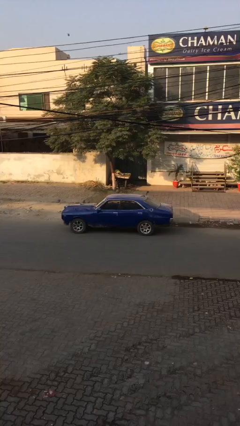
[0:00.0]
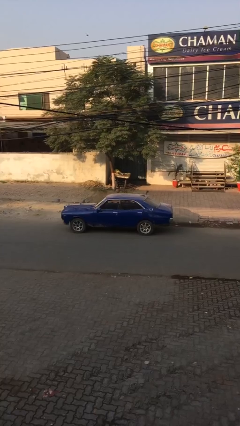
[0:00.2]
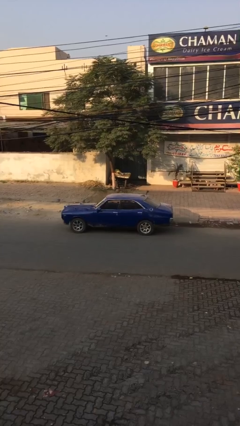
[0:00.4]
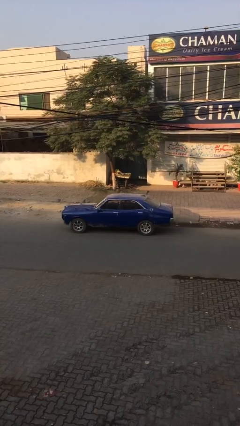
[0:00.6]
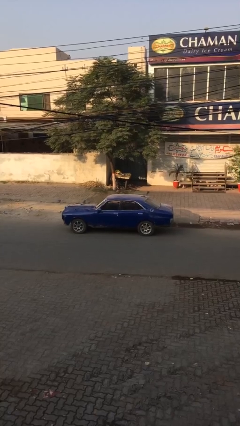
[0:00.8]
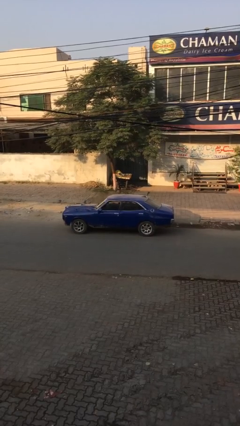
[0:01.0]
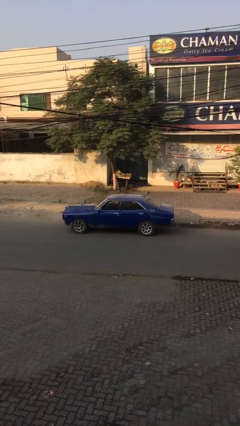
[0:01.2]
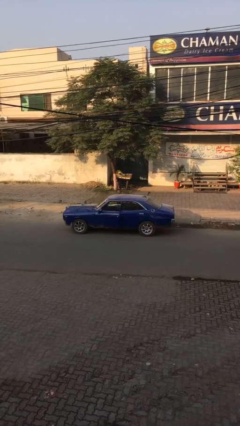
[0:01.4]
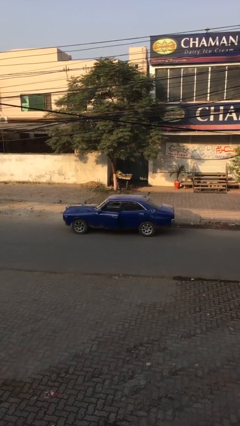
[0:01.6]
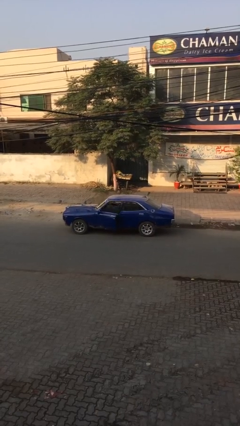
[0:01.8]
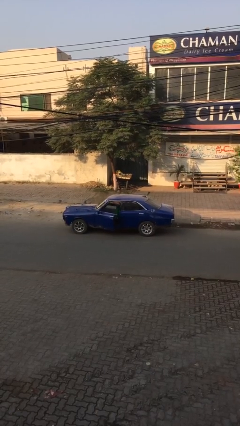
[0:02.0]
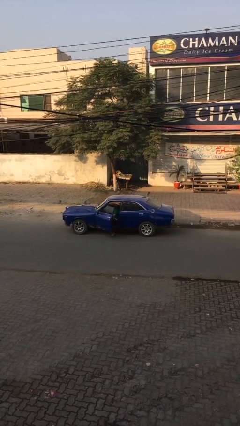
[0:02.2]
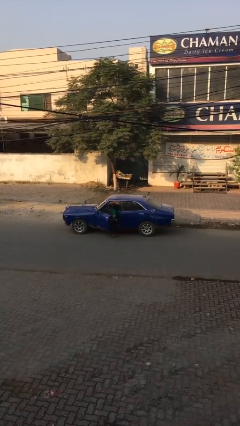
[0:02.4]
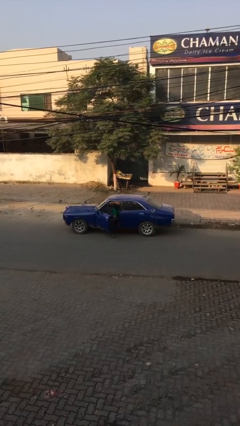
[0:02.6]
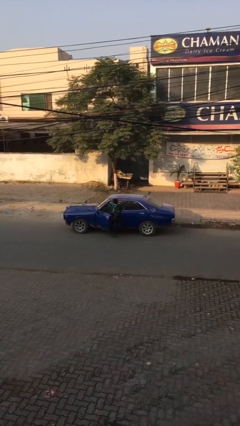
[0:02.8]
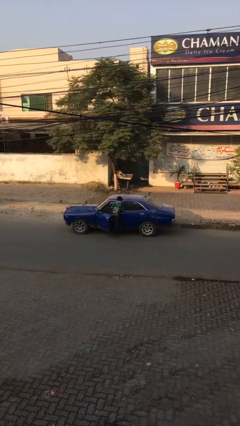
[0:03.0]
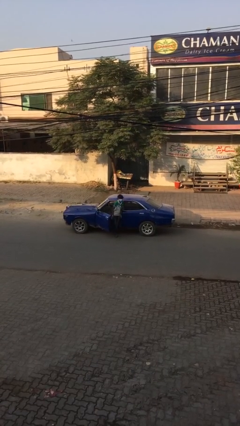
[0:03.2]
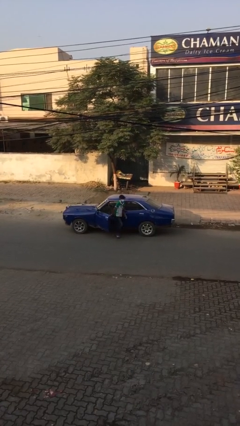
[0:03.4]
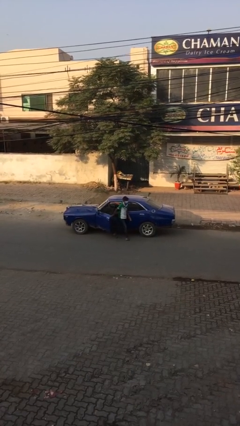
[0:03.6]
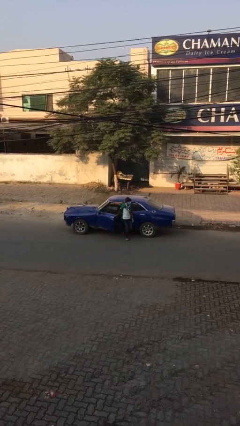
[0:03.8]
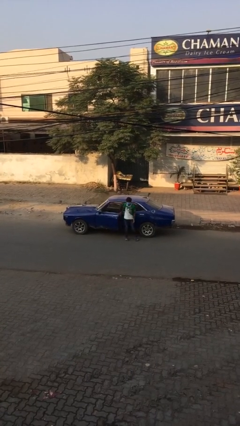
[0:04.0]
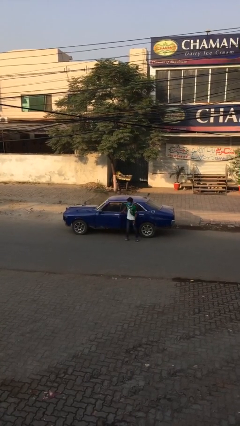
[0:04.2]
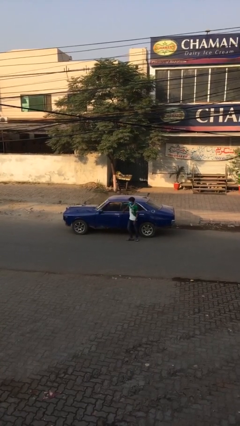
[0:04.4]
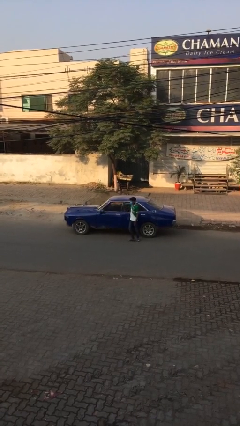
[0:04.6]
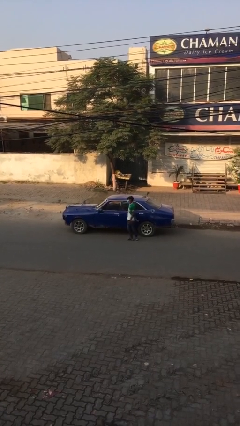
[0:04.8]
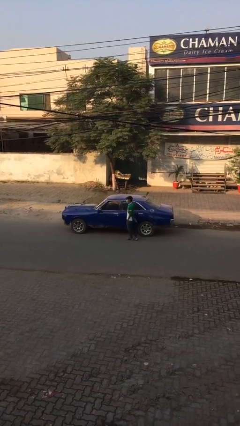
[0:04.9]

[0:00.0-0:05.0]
car drops off person

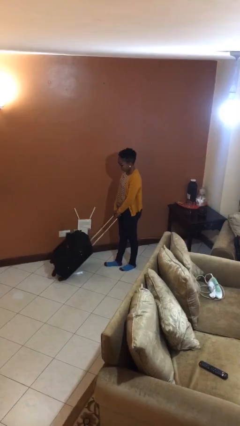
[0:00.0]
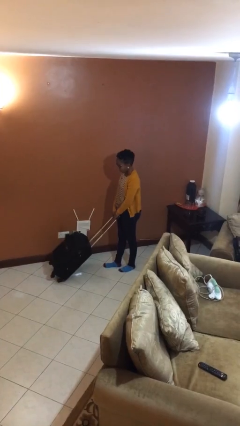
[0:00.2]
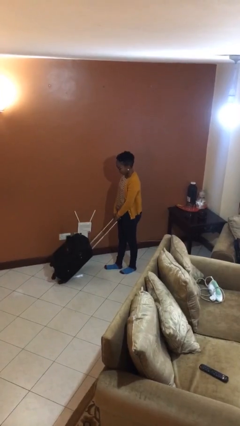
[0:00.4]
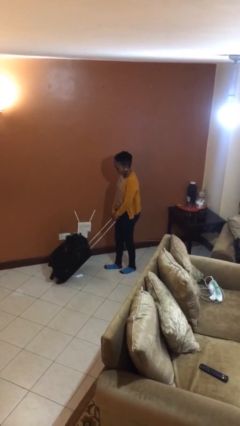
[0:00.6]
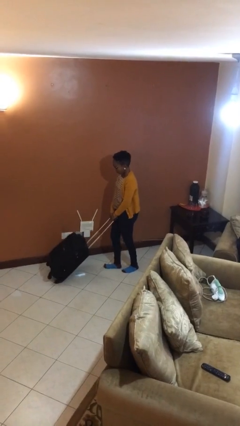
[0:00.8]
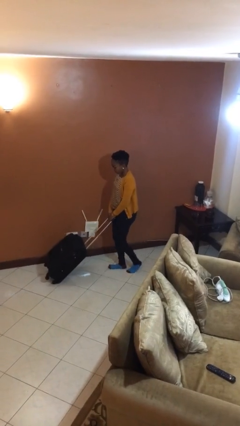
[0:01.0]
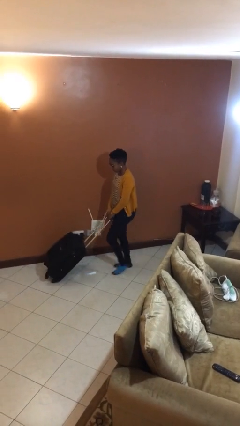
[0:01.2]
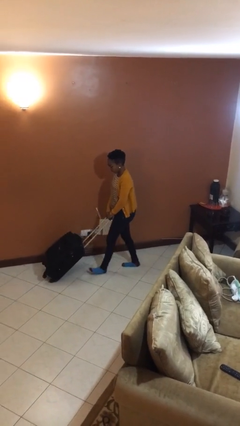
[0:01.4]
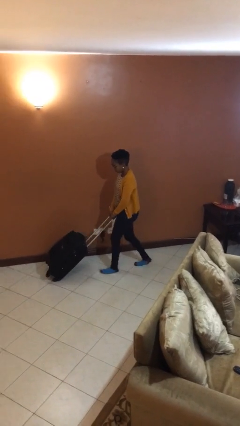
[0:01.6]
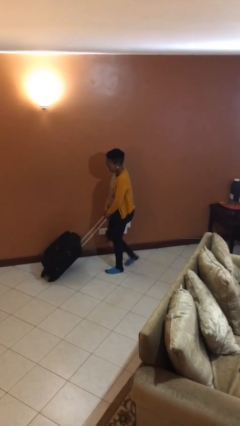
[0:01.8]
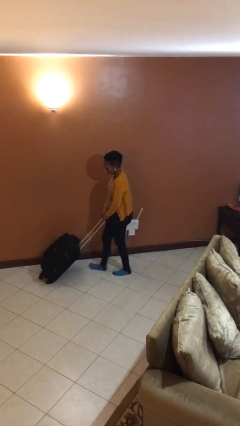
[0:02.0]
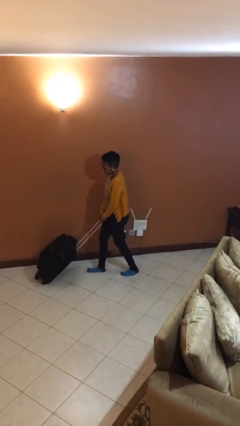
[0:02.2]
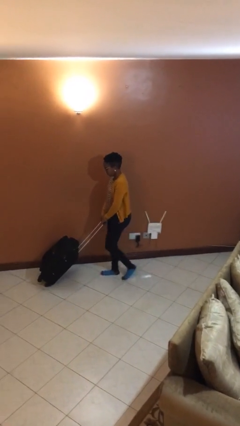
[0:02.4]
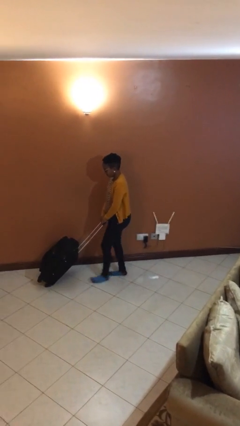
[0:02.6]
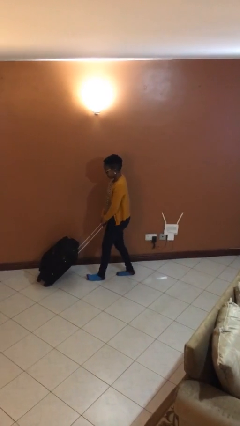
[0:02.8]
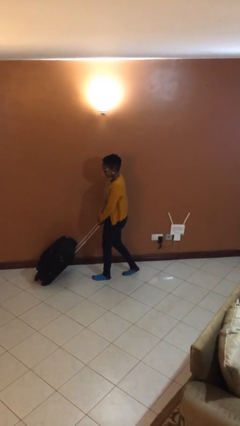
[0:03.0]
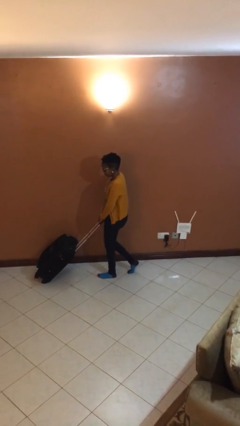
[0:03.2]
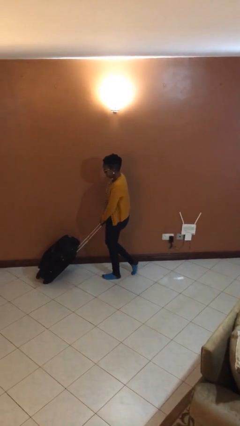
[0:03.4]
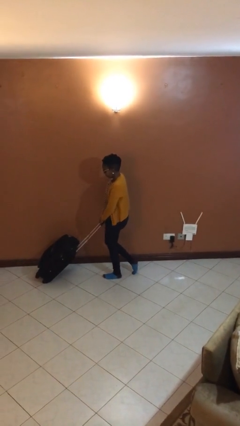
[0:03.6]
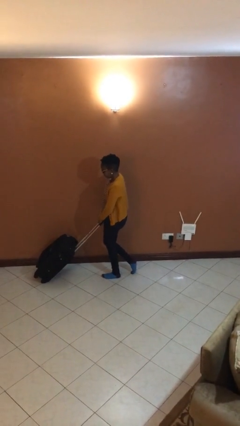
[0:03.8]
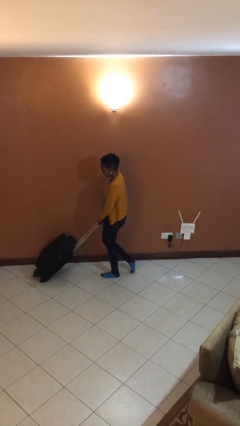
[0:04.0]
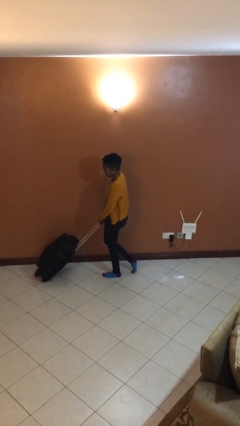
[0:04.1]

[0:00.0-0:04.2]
person pushes wheeled cart

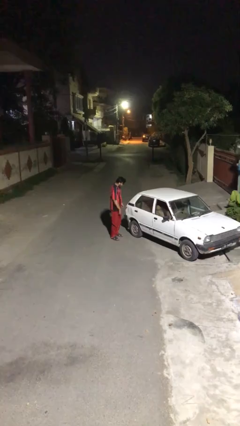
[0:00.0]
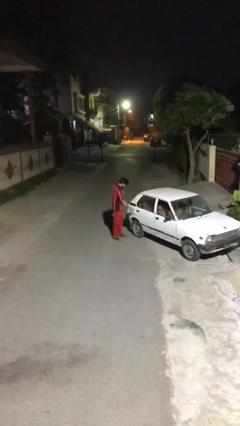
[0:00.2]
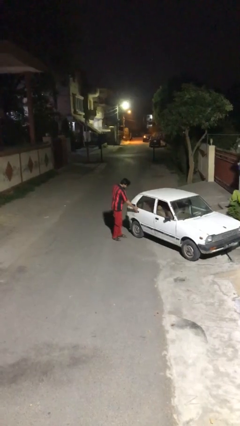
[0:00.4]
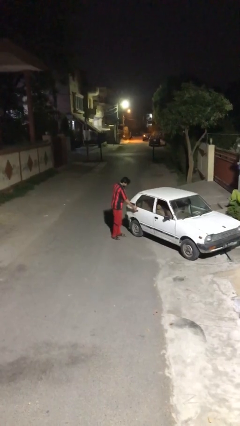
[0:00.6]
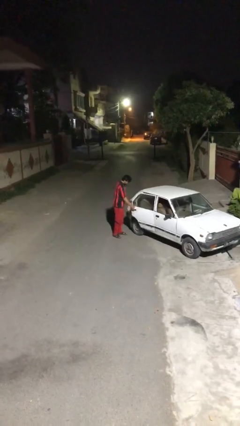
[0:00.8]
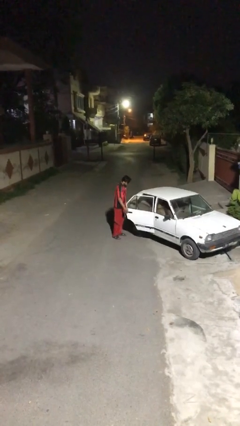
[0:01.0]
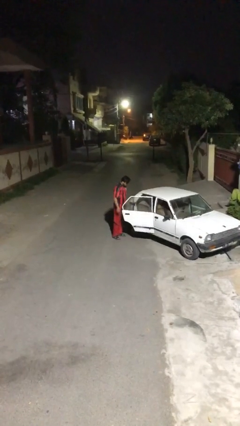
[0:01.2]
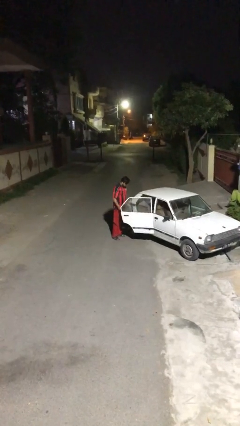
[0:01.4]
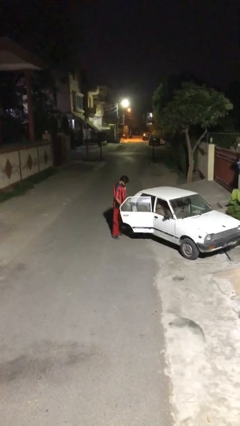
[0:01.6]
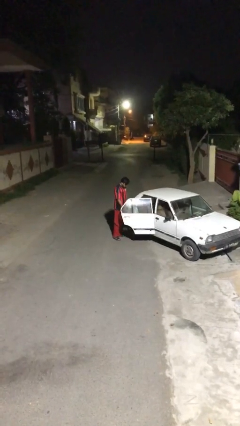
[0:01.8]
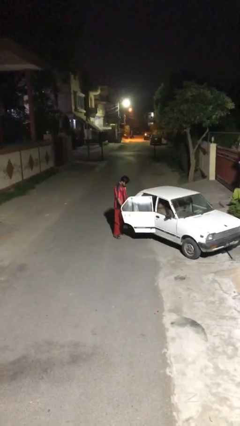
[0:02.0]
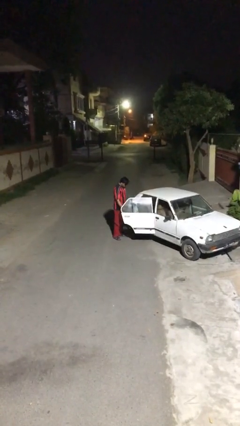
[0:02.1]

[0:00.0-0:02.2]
person opens car door

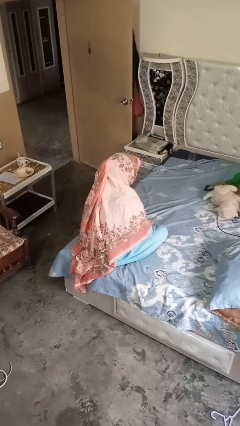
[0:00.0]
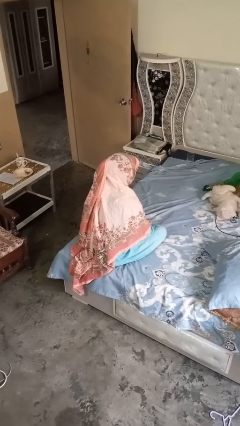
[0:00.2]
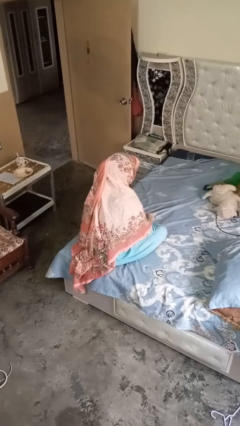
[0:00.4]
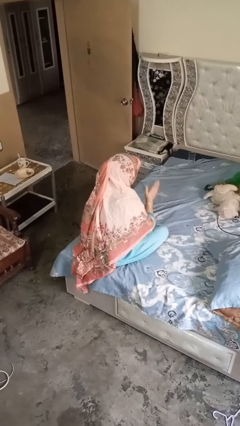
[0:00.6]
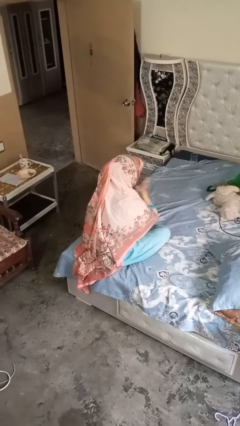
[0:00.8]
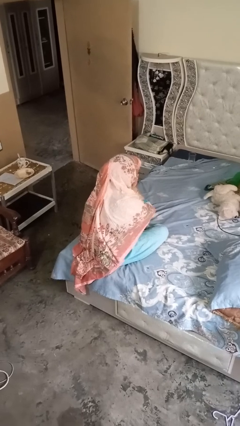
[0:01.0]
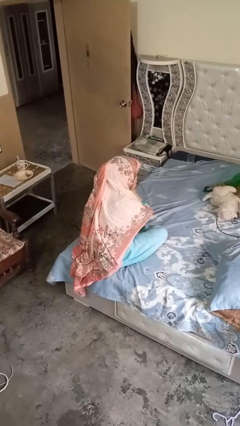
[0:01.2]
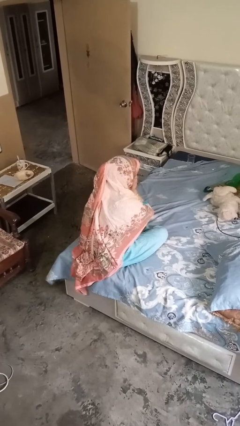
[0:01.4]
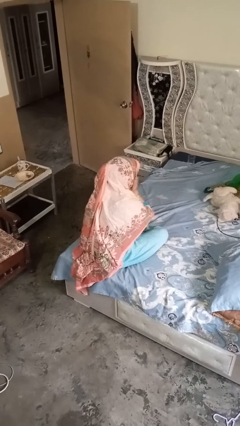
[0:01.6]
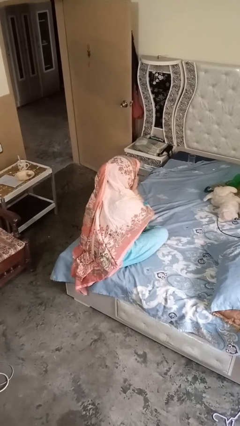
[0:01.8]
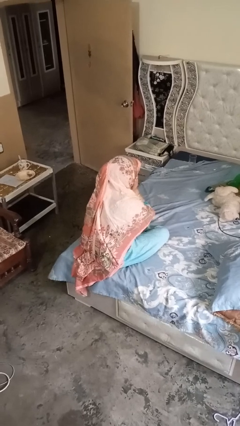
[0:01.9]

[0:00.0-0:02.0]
person strokes chin

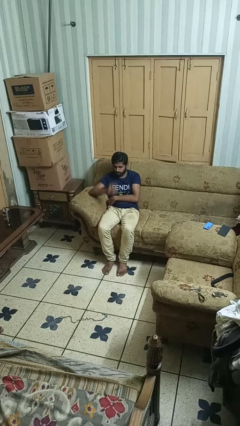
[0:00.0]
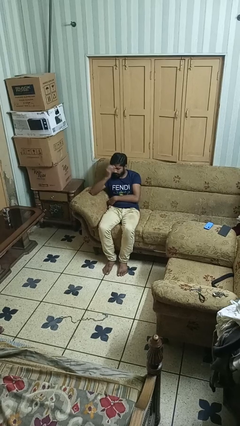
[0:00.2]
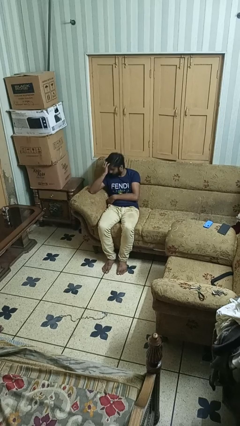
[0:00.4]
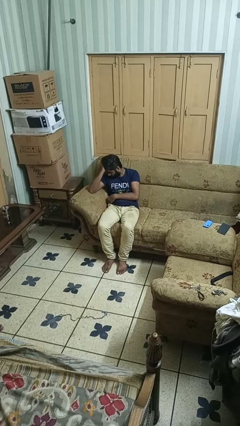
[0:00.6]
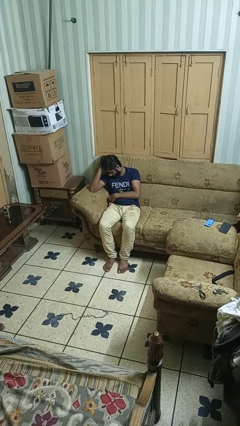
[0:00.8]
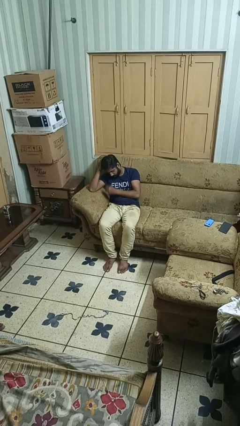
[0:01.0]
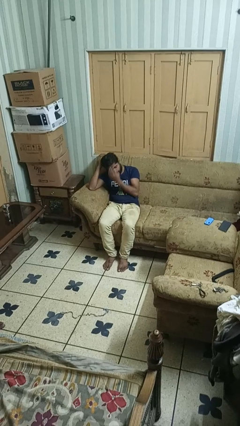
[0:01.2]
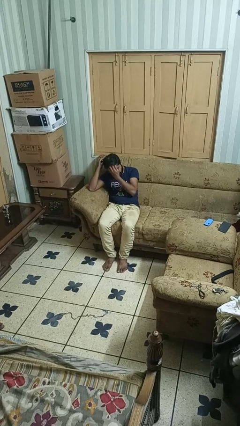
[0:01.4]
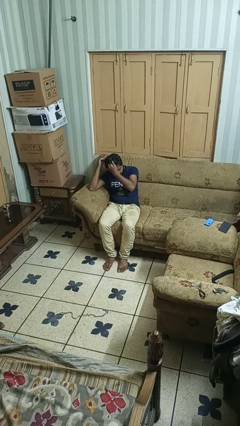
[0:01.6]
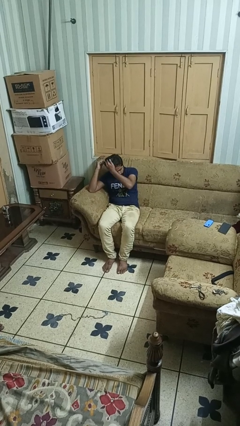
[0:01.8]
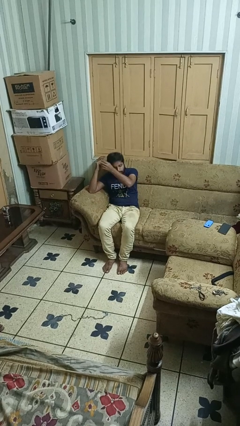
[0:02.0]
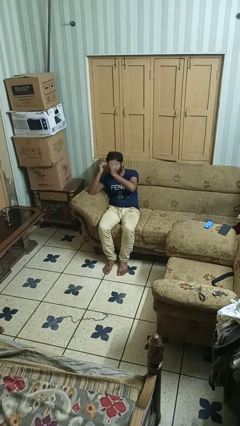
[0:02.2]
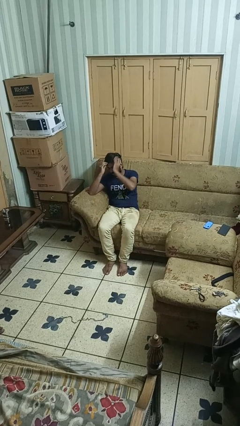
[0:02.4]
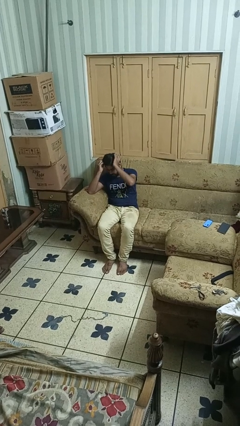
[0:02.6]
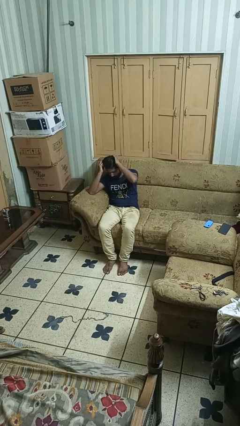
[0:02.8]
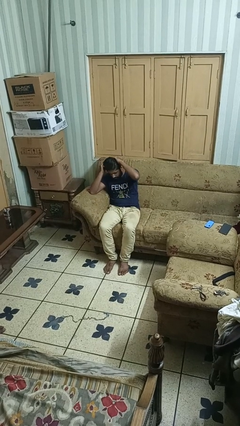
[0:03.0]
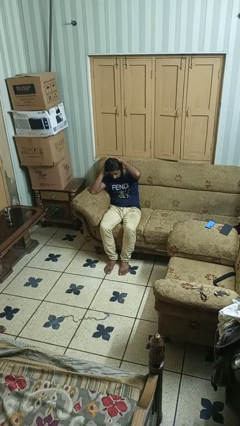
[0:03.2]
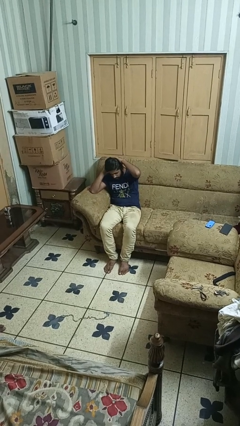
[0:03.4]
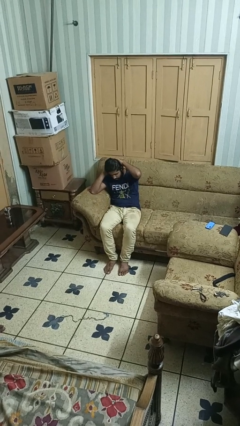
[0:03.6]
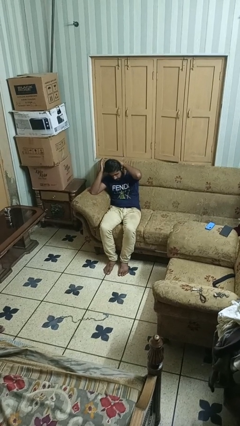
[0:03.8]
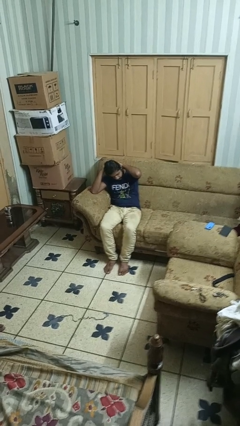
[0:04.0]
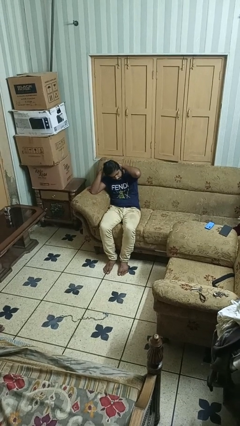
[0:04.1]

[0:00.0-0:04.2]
person strokes hair
